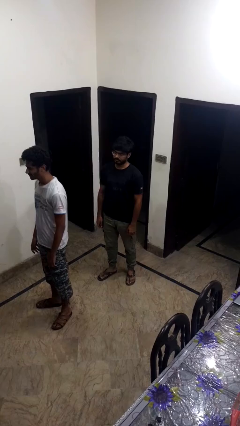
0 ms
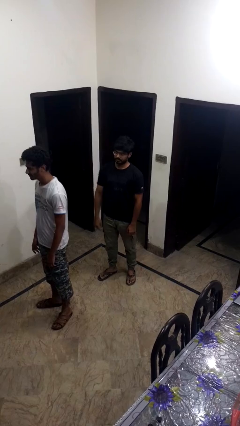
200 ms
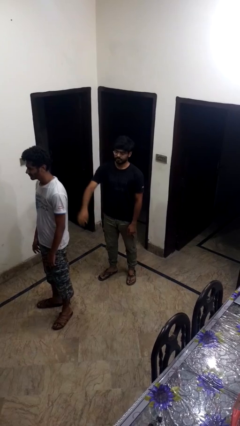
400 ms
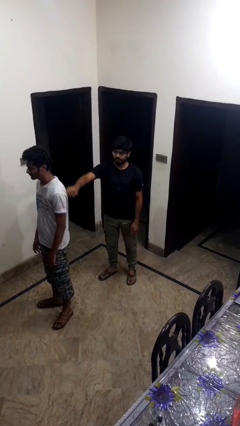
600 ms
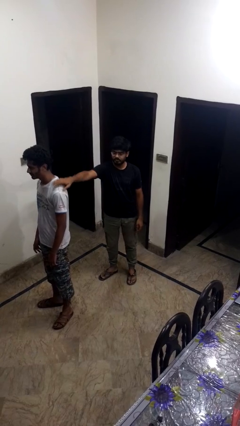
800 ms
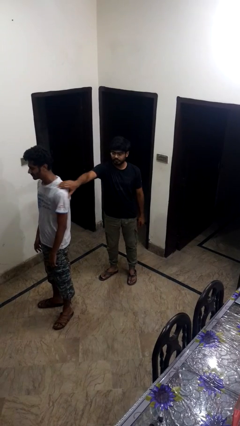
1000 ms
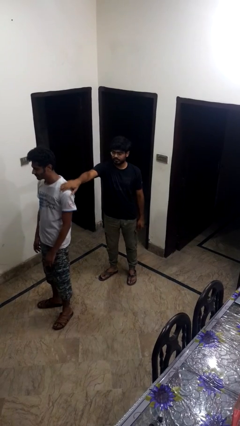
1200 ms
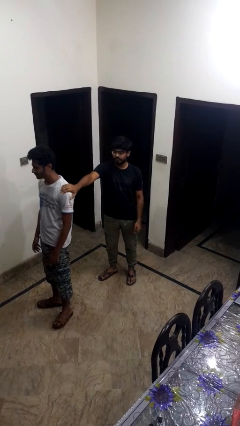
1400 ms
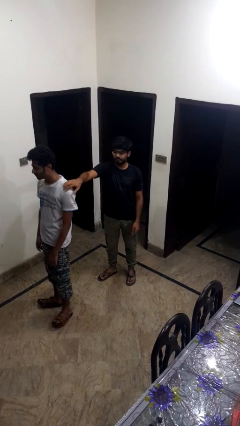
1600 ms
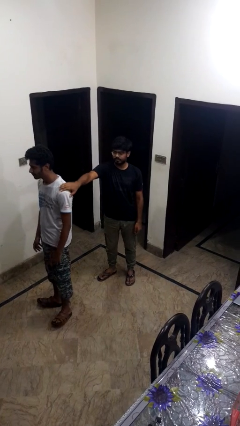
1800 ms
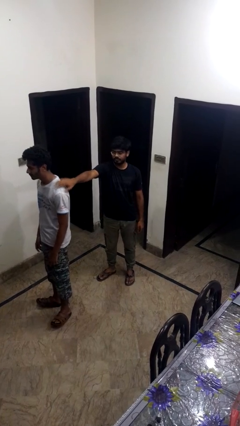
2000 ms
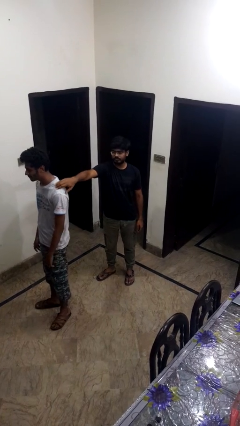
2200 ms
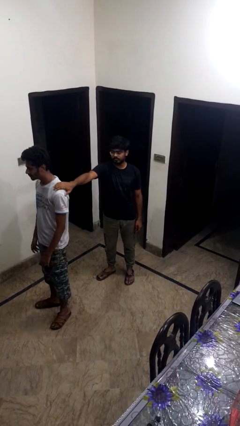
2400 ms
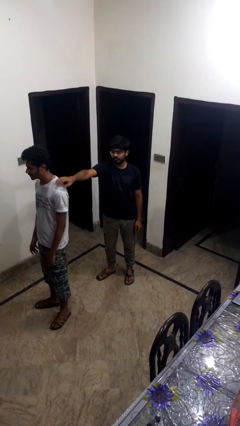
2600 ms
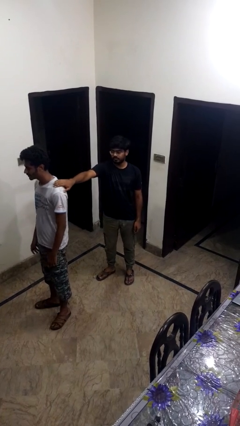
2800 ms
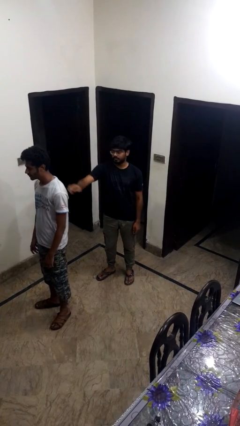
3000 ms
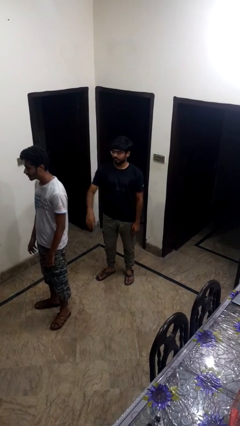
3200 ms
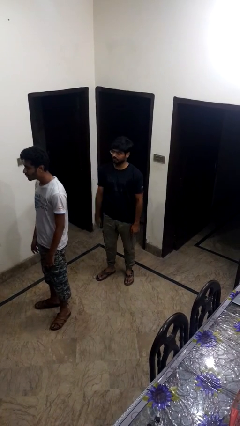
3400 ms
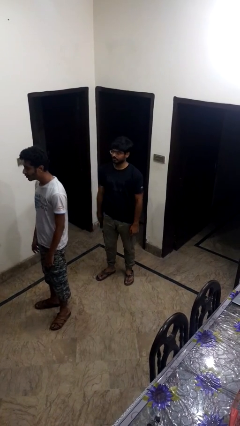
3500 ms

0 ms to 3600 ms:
person touches back of person

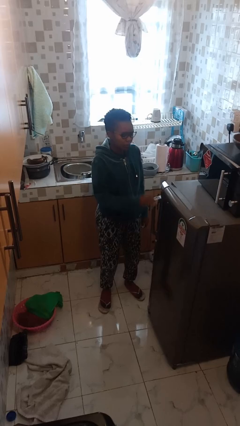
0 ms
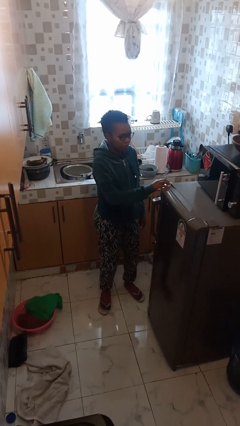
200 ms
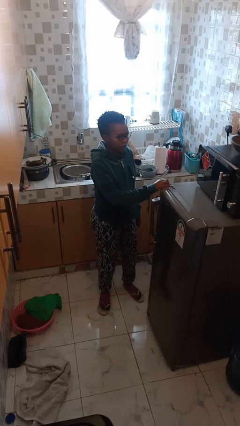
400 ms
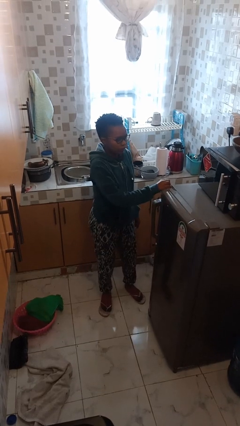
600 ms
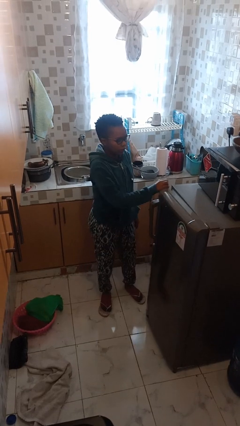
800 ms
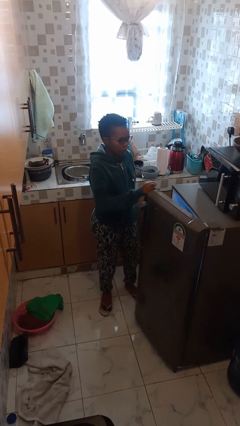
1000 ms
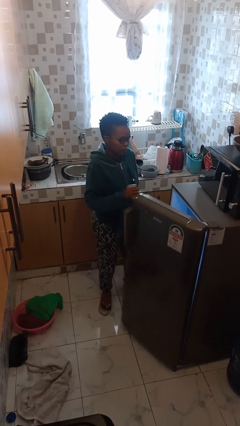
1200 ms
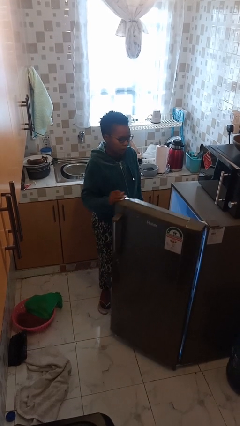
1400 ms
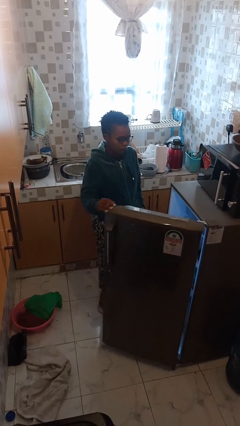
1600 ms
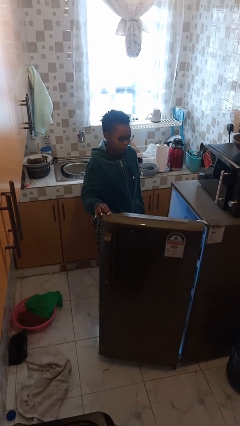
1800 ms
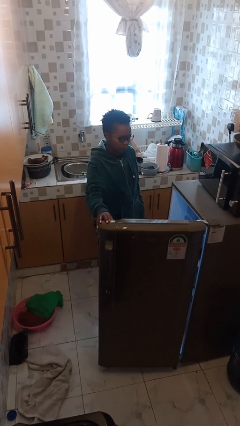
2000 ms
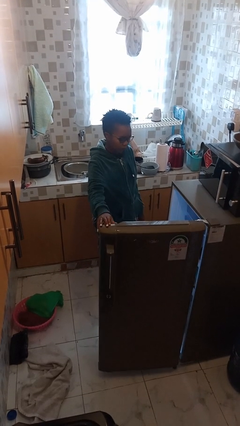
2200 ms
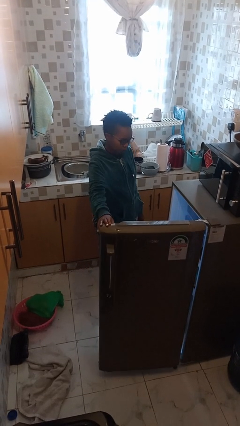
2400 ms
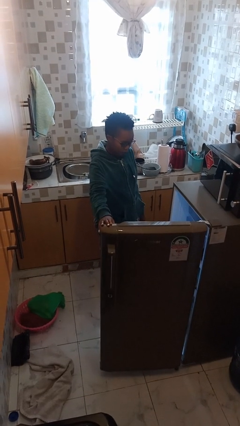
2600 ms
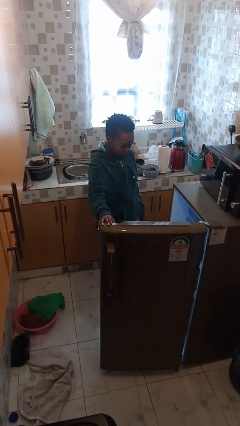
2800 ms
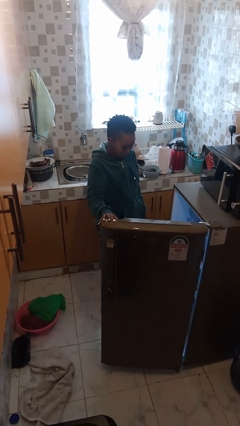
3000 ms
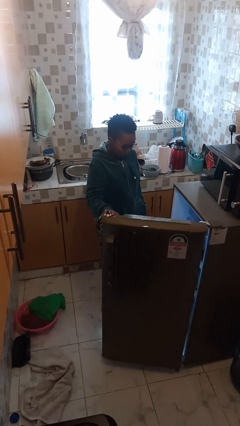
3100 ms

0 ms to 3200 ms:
person opens refrigerator

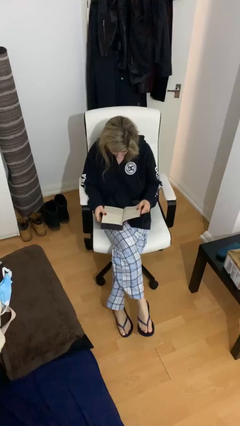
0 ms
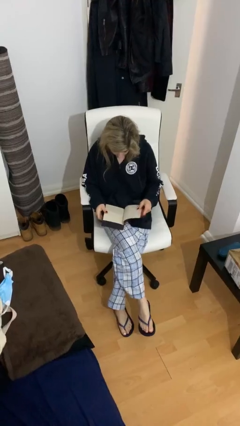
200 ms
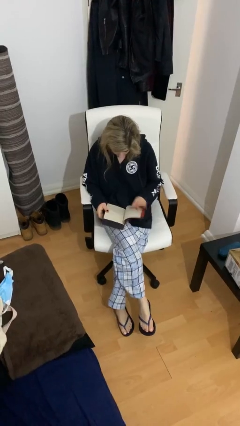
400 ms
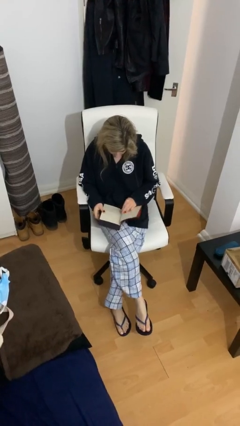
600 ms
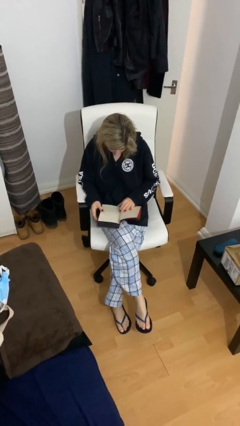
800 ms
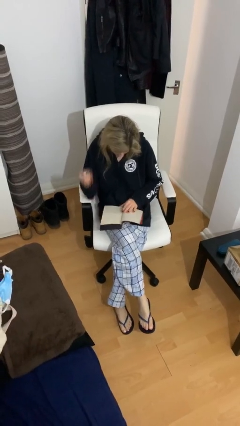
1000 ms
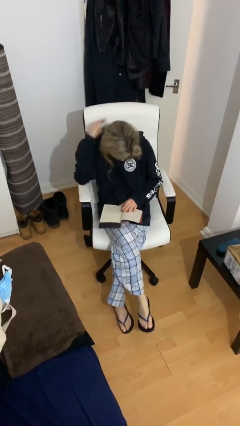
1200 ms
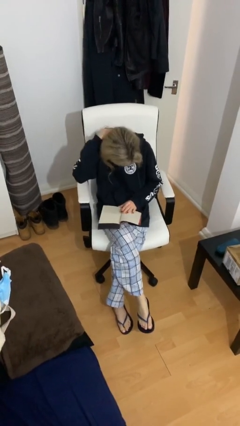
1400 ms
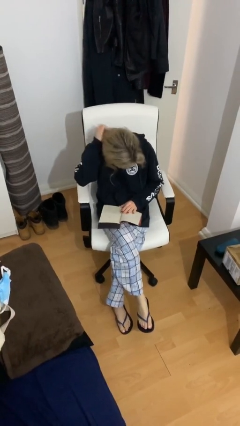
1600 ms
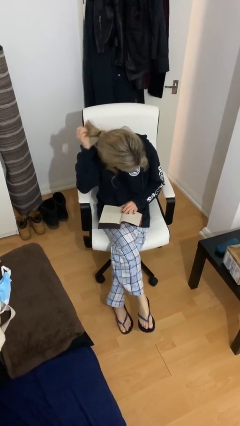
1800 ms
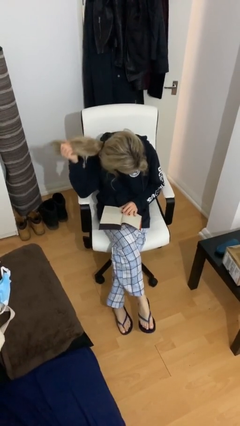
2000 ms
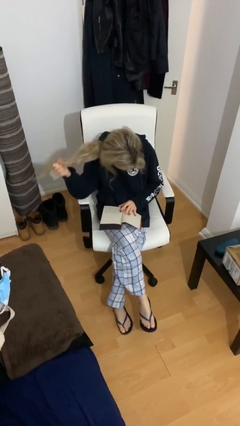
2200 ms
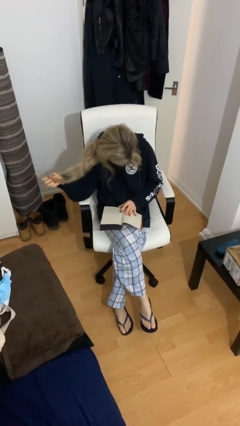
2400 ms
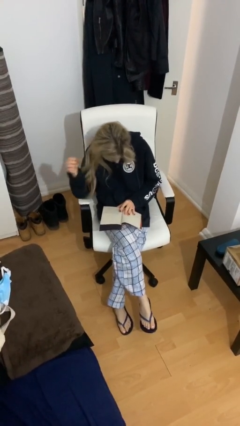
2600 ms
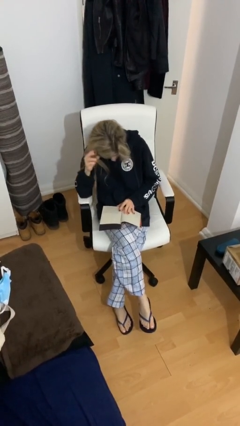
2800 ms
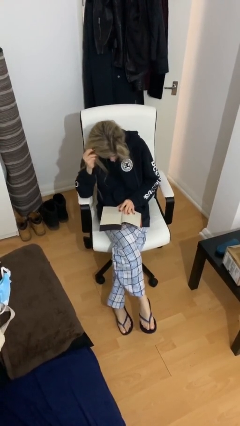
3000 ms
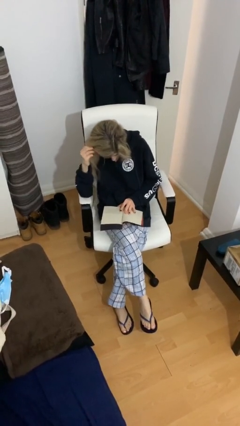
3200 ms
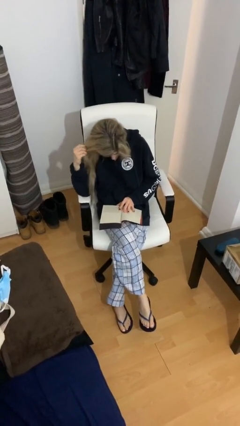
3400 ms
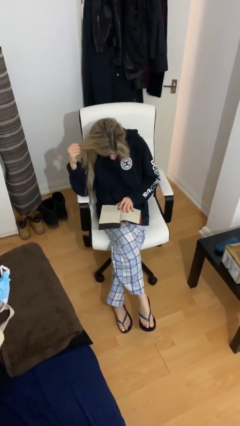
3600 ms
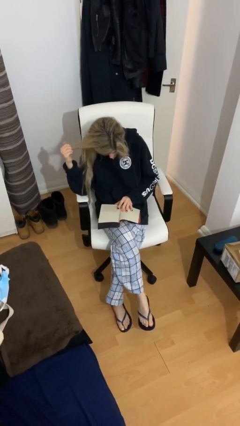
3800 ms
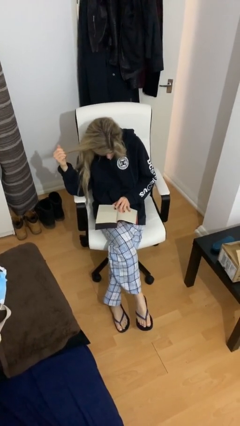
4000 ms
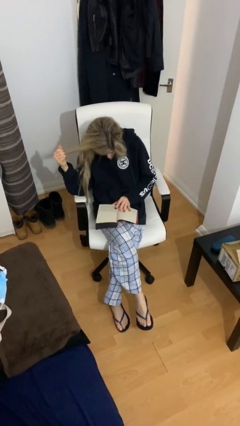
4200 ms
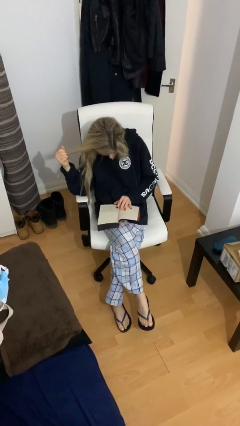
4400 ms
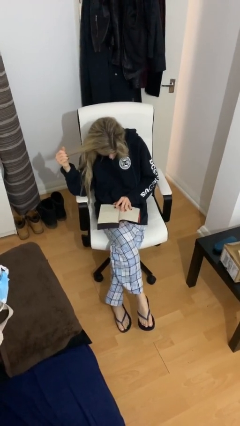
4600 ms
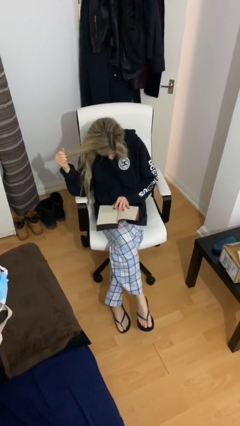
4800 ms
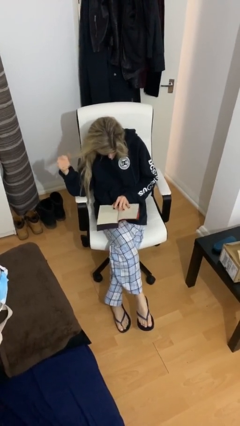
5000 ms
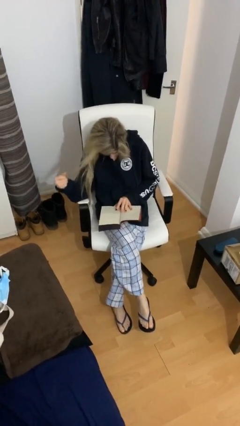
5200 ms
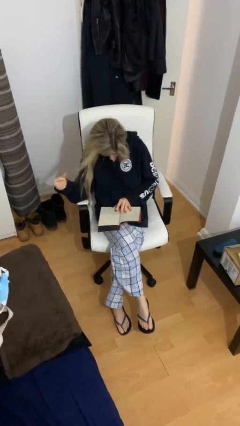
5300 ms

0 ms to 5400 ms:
person reads document

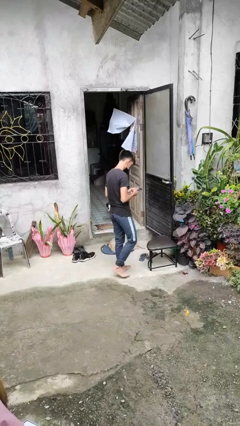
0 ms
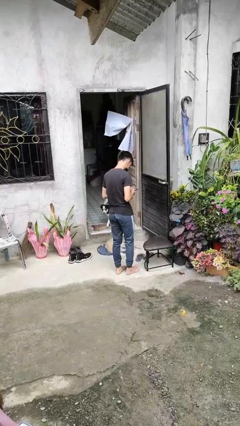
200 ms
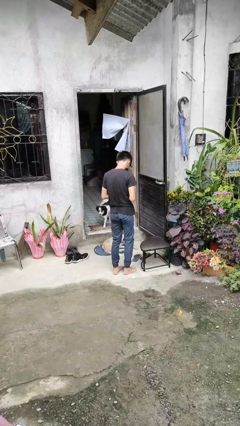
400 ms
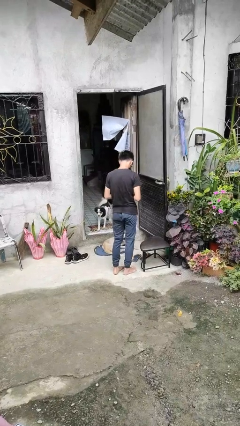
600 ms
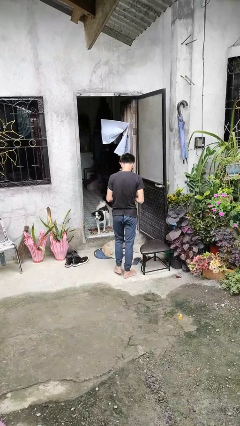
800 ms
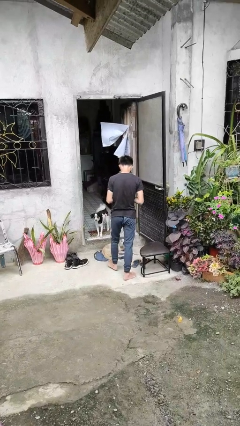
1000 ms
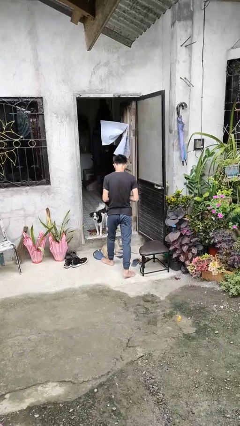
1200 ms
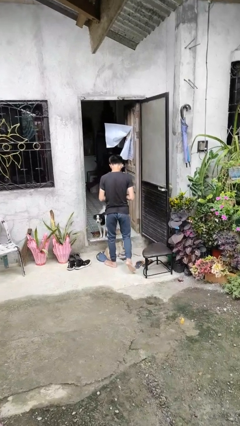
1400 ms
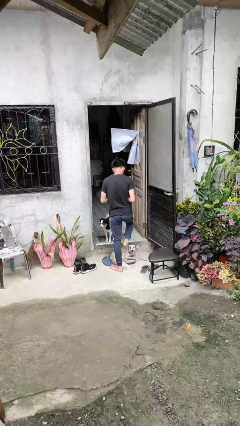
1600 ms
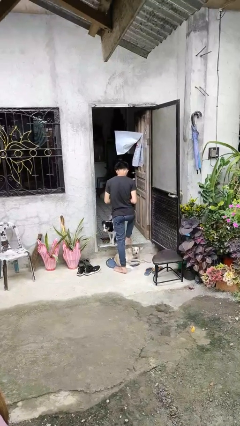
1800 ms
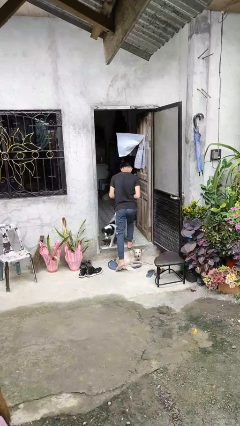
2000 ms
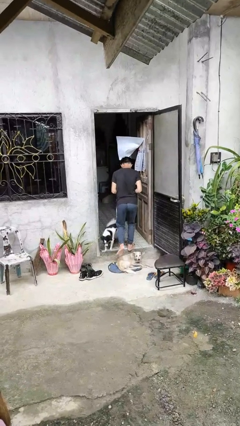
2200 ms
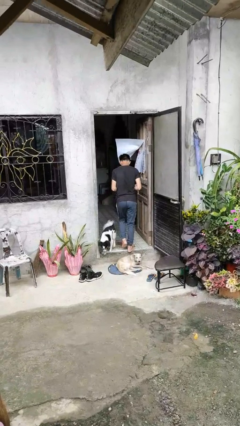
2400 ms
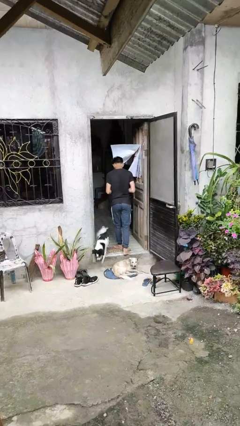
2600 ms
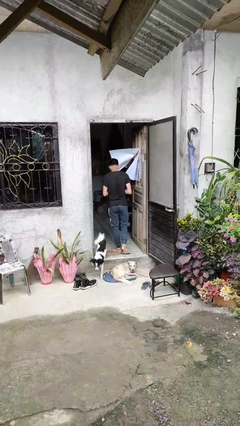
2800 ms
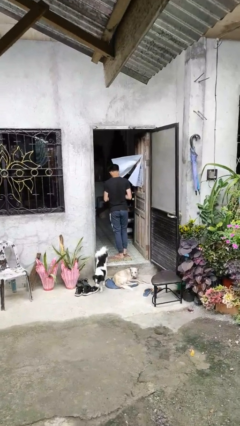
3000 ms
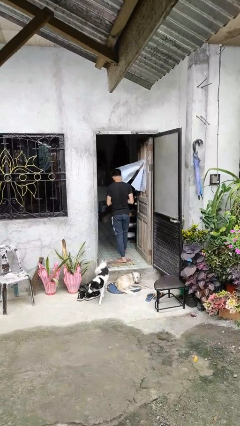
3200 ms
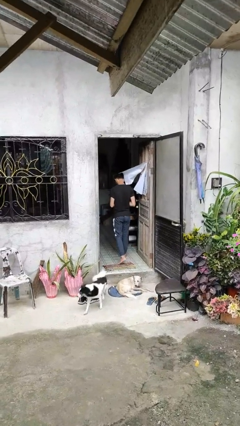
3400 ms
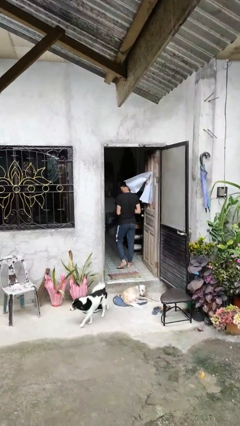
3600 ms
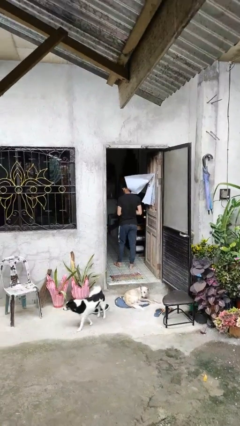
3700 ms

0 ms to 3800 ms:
person exits scene through structure

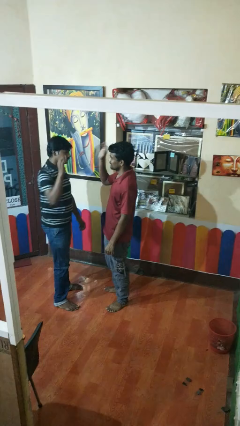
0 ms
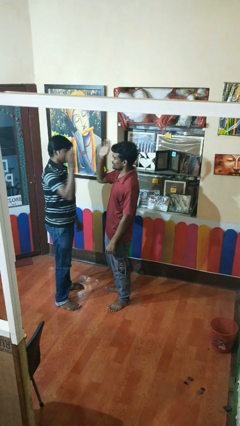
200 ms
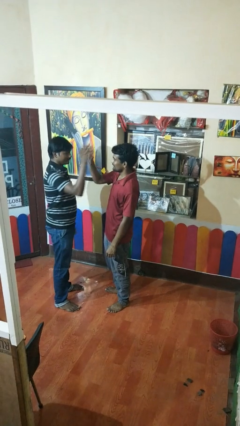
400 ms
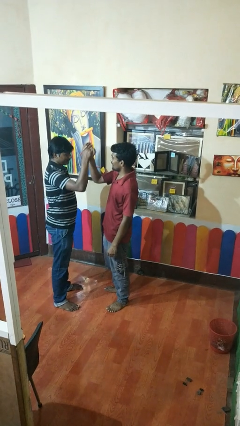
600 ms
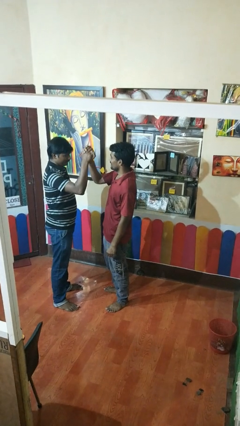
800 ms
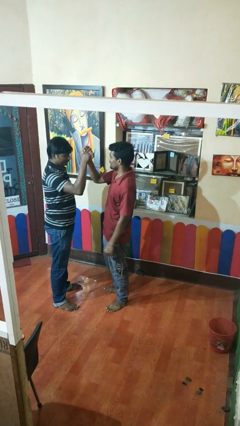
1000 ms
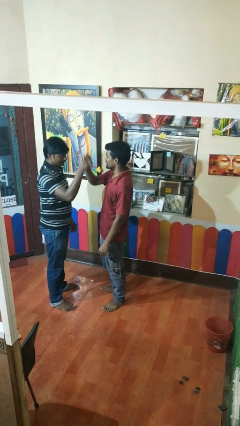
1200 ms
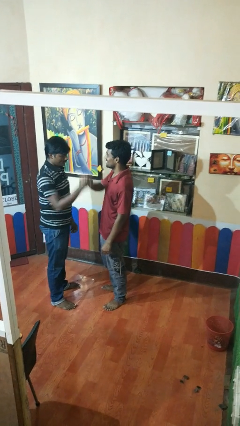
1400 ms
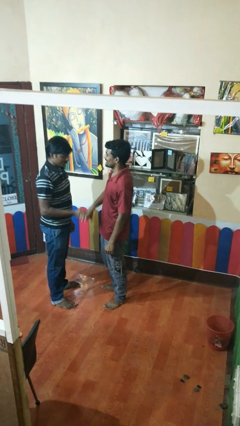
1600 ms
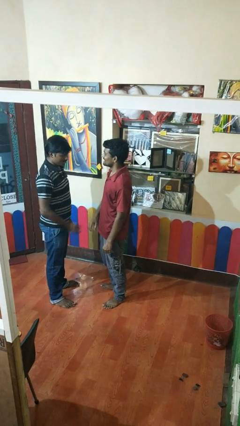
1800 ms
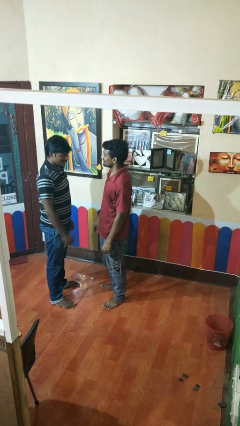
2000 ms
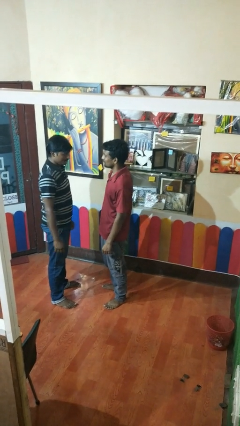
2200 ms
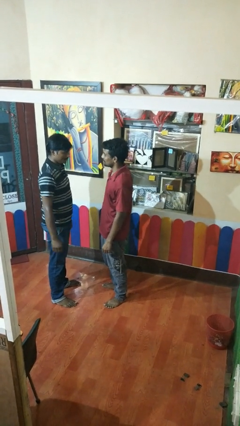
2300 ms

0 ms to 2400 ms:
person highfives hand
